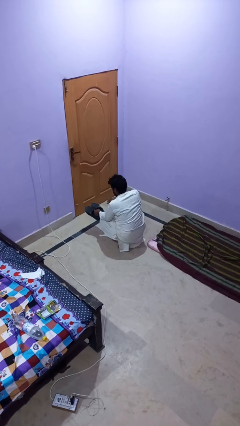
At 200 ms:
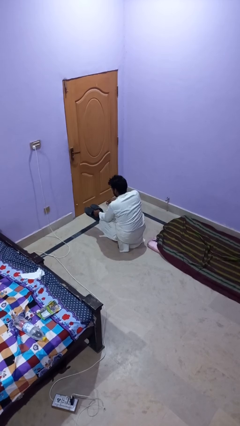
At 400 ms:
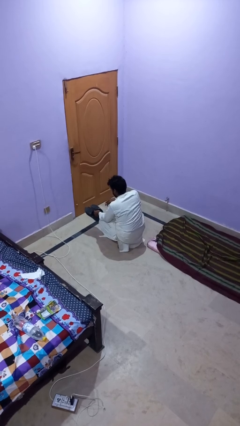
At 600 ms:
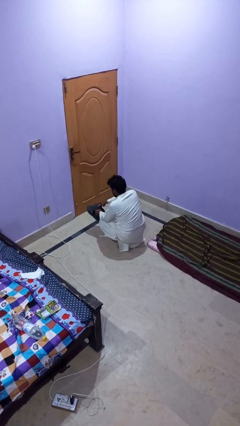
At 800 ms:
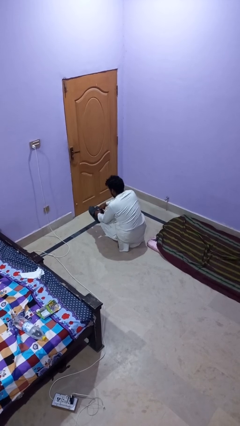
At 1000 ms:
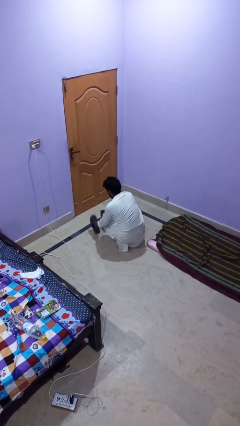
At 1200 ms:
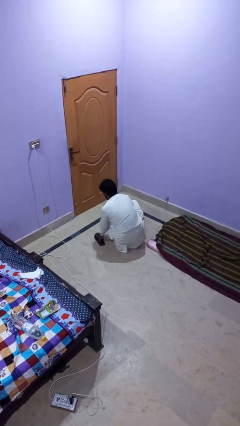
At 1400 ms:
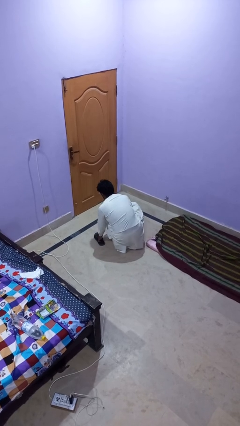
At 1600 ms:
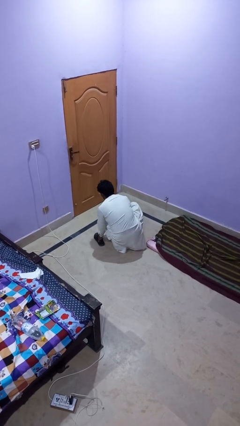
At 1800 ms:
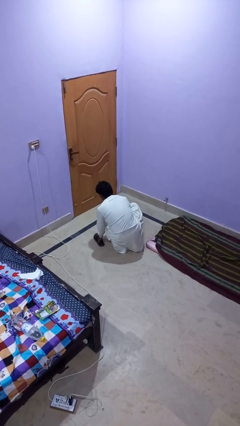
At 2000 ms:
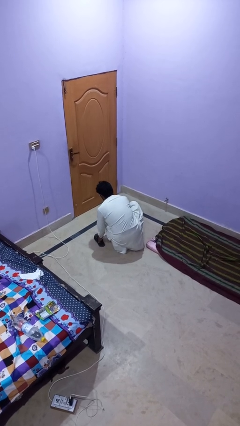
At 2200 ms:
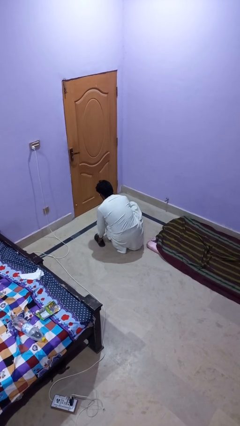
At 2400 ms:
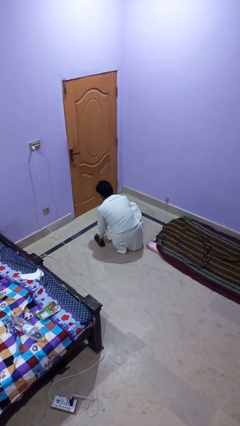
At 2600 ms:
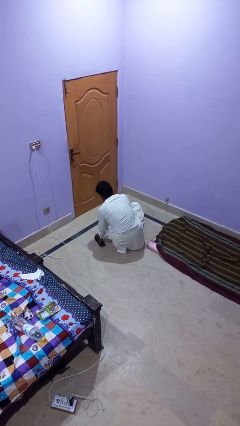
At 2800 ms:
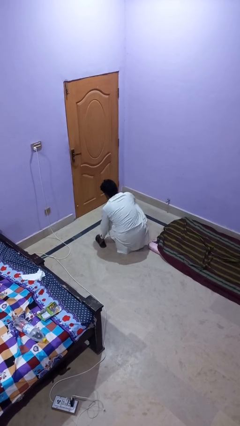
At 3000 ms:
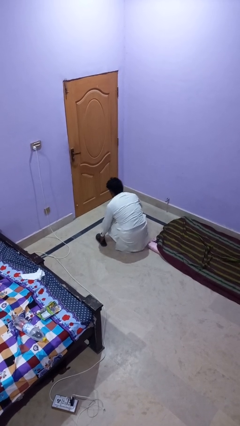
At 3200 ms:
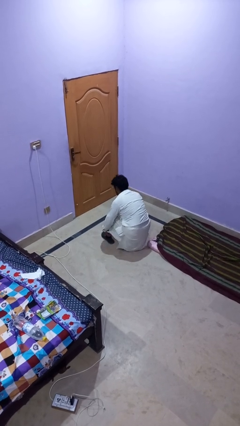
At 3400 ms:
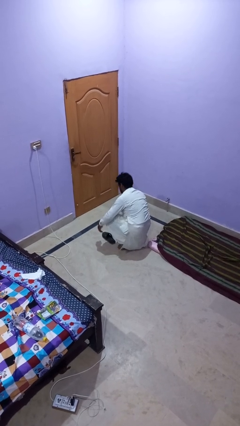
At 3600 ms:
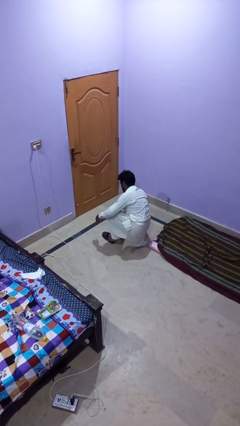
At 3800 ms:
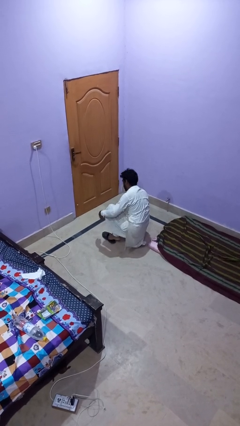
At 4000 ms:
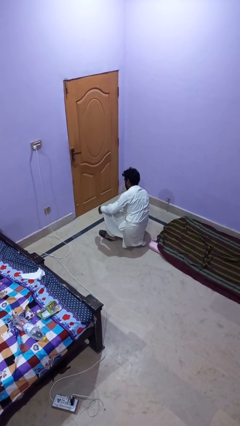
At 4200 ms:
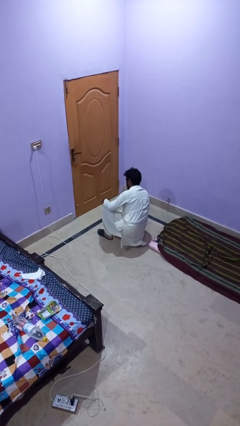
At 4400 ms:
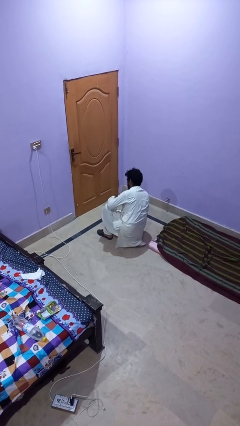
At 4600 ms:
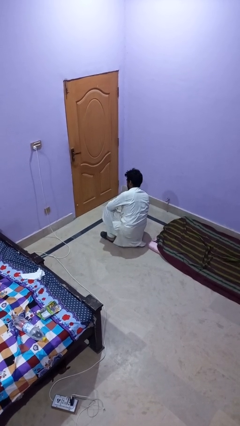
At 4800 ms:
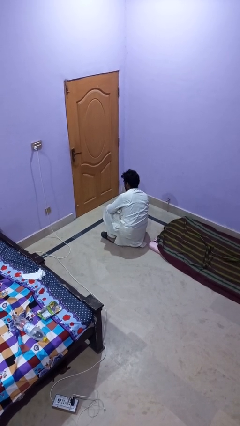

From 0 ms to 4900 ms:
person puts on shoes

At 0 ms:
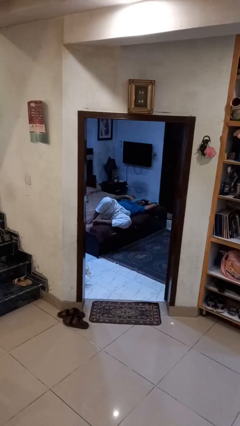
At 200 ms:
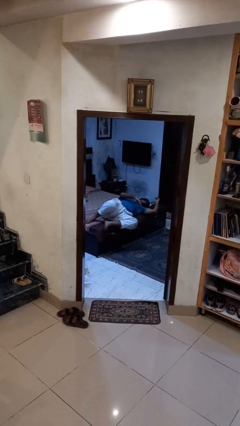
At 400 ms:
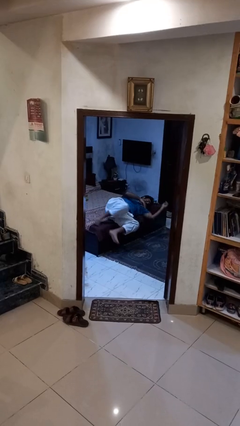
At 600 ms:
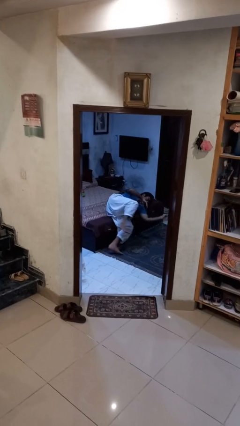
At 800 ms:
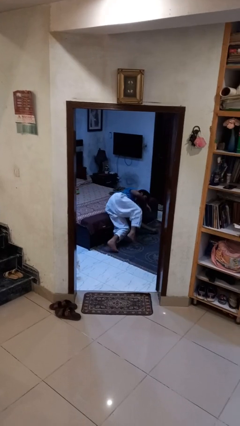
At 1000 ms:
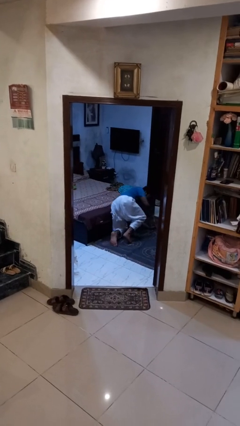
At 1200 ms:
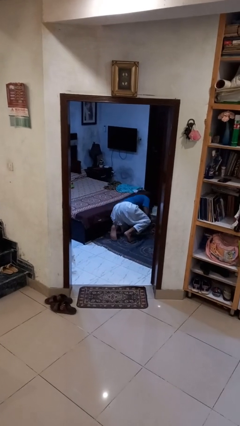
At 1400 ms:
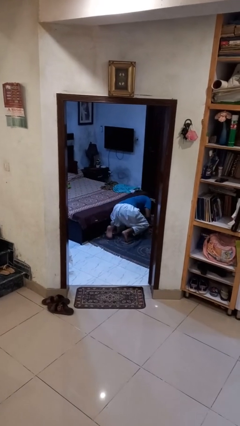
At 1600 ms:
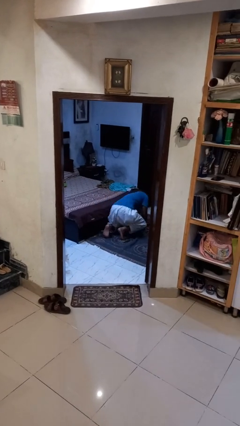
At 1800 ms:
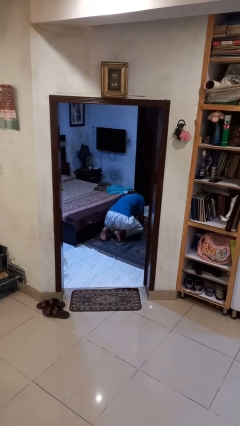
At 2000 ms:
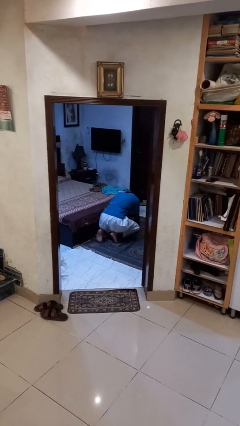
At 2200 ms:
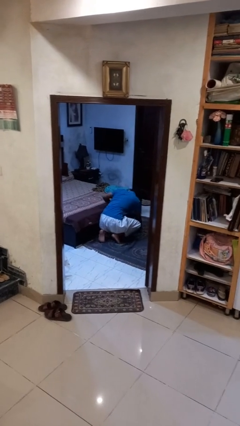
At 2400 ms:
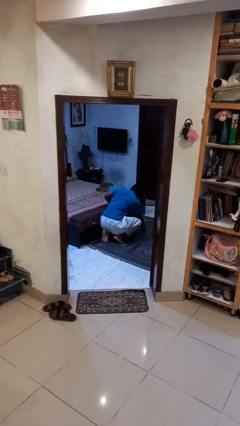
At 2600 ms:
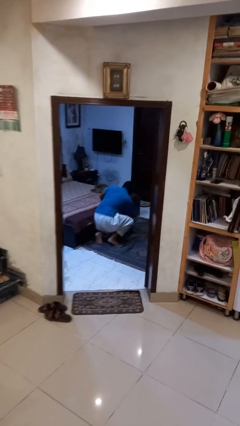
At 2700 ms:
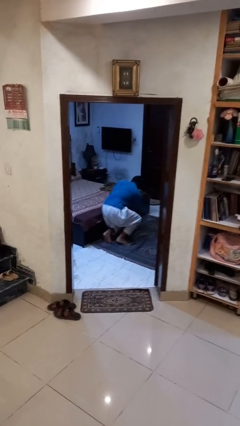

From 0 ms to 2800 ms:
person falls from bed

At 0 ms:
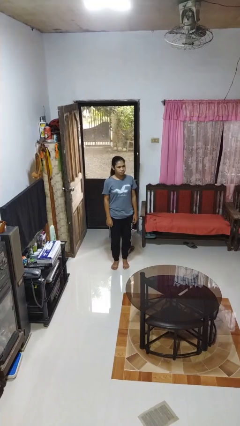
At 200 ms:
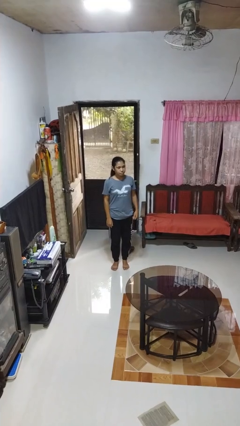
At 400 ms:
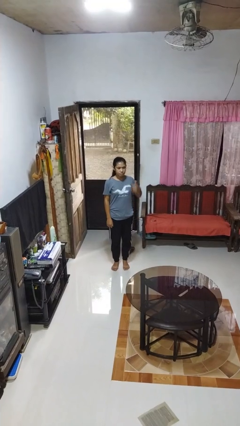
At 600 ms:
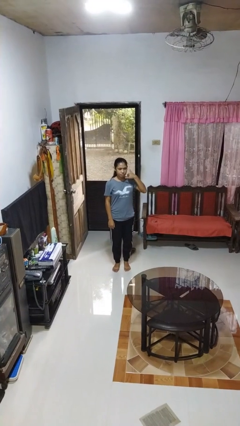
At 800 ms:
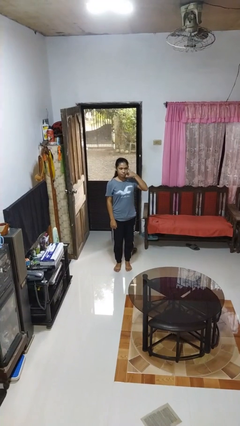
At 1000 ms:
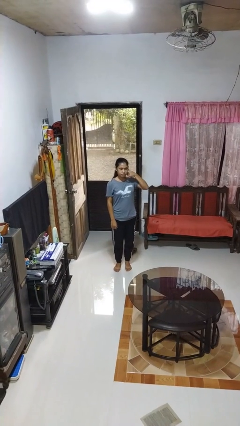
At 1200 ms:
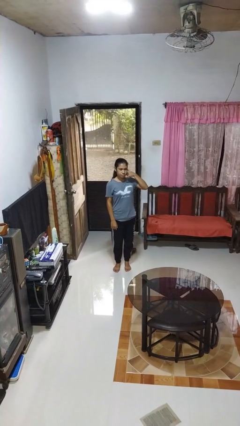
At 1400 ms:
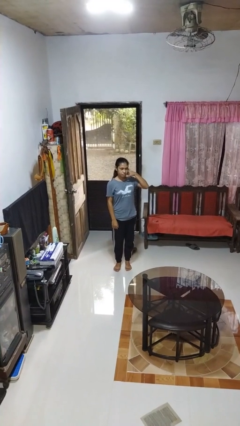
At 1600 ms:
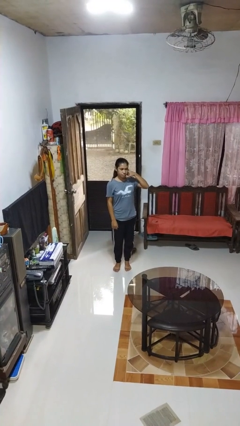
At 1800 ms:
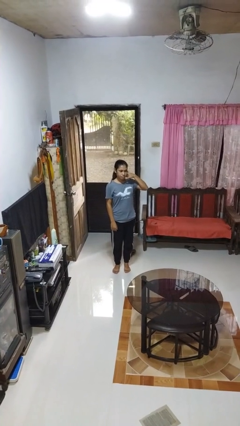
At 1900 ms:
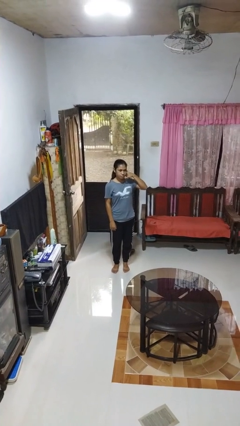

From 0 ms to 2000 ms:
person gestures call me

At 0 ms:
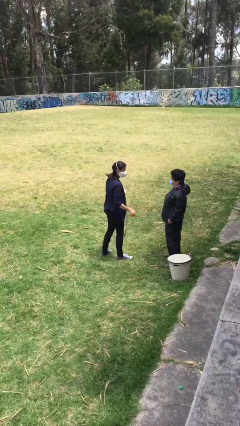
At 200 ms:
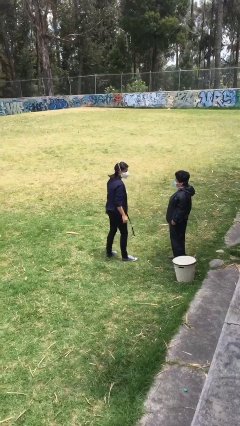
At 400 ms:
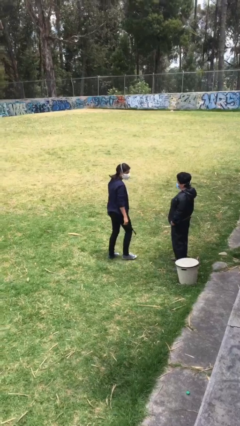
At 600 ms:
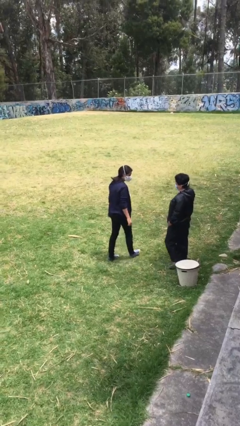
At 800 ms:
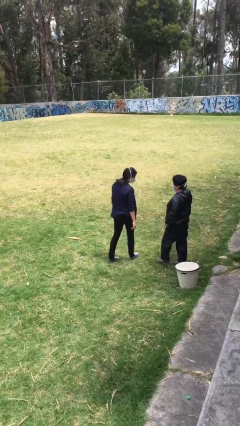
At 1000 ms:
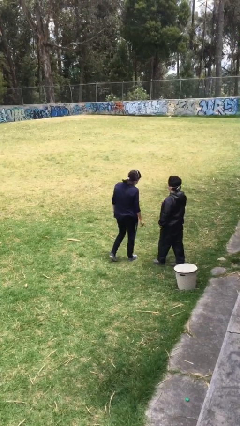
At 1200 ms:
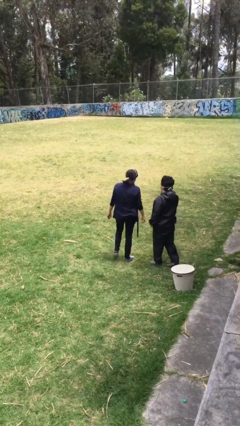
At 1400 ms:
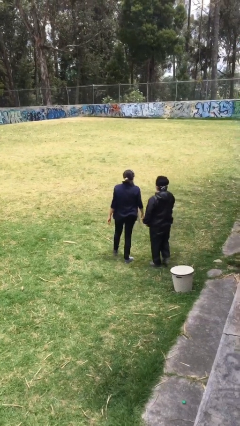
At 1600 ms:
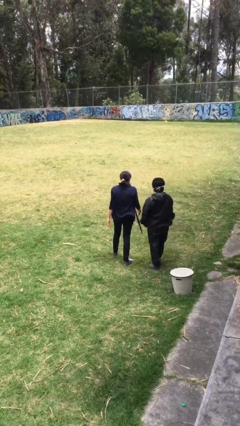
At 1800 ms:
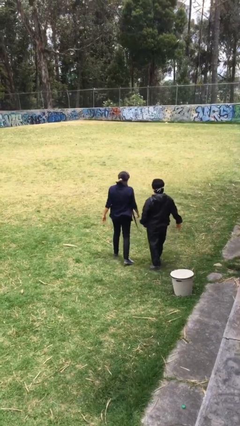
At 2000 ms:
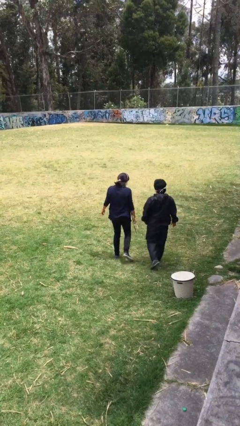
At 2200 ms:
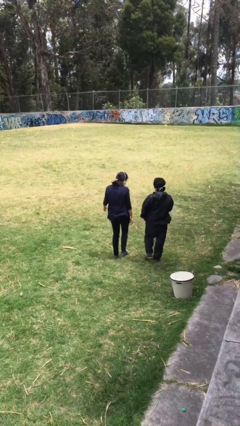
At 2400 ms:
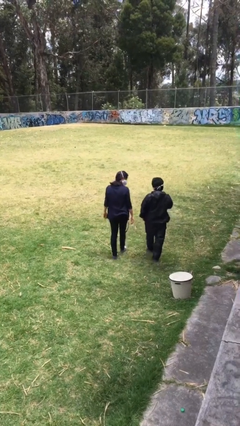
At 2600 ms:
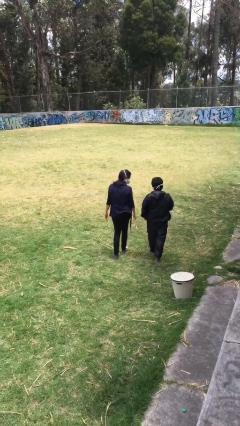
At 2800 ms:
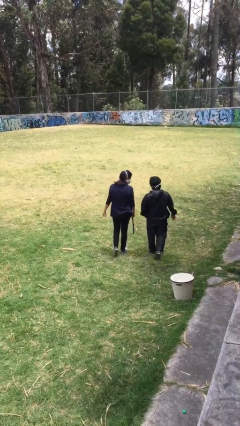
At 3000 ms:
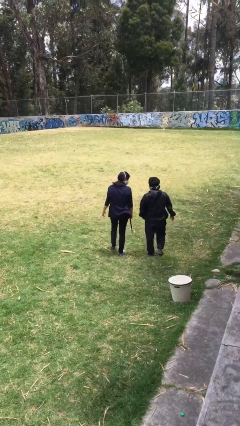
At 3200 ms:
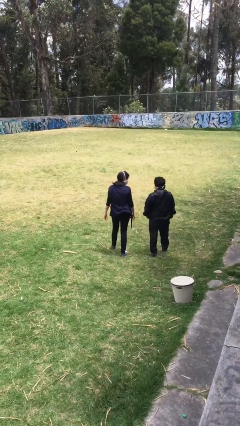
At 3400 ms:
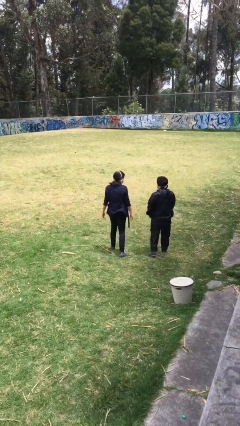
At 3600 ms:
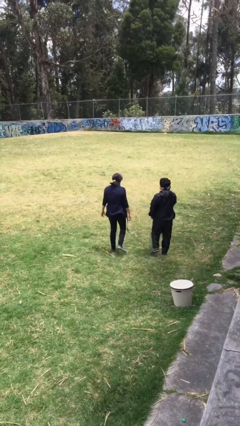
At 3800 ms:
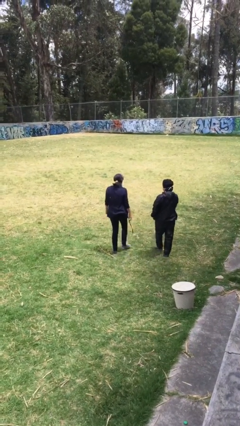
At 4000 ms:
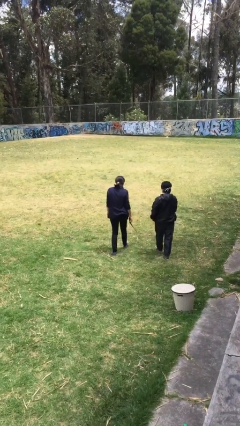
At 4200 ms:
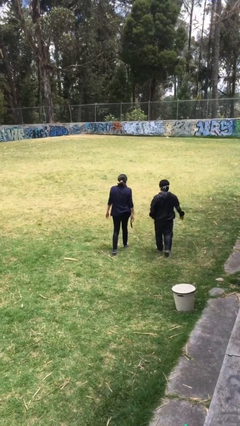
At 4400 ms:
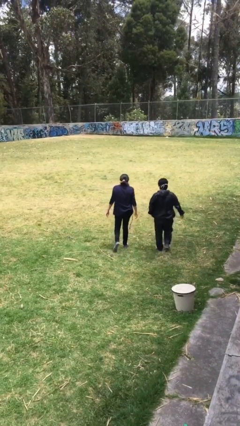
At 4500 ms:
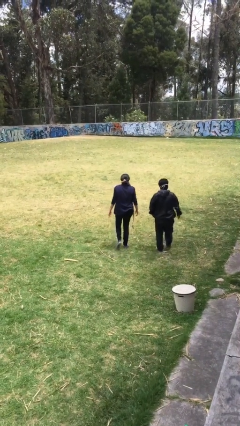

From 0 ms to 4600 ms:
person talks to person

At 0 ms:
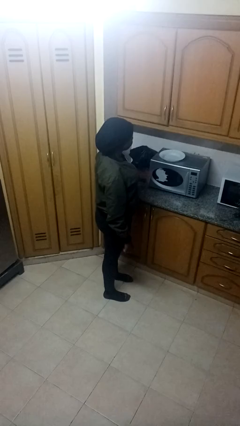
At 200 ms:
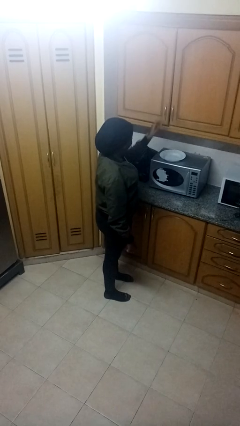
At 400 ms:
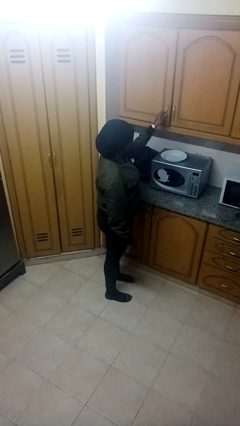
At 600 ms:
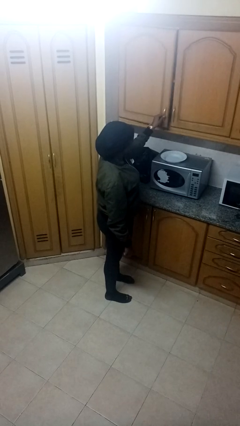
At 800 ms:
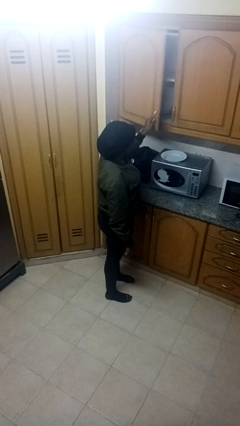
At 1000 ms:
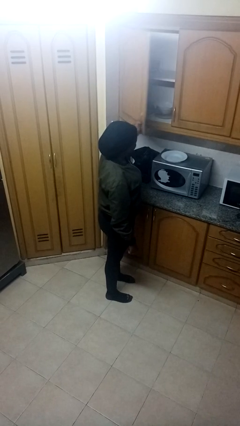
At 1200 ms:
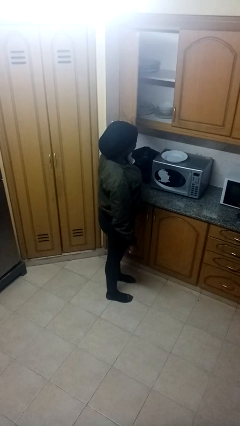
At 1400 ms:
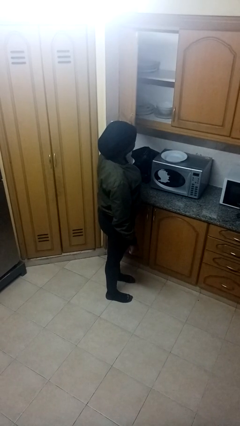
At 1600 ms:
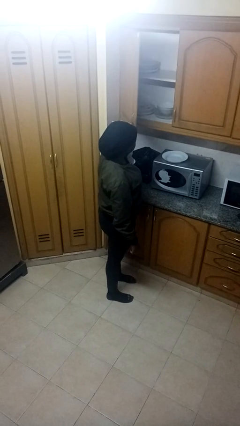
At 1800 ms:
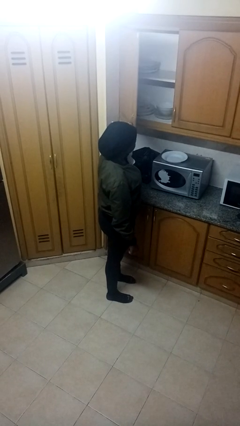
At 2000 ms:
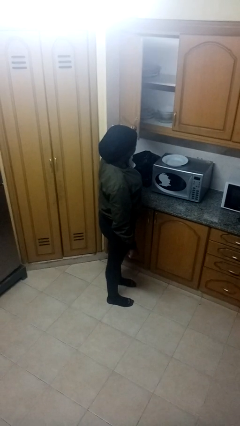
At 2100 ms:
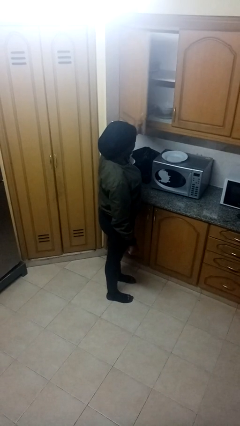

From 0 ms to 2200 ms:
person opens cabinet

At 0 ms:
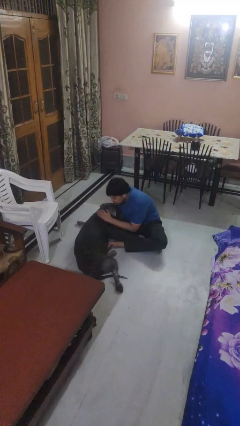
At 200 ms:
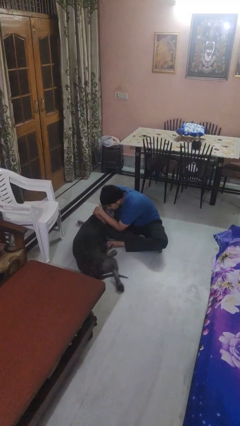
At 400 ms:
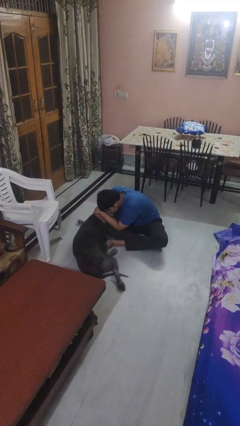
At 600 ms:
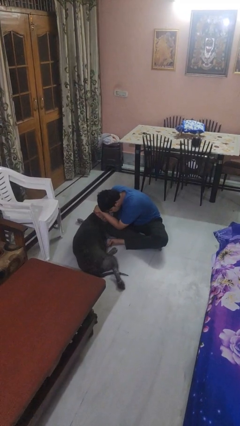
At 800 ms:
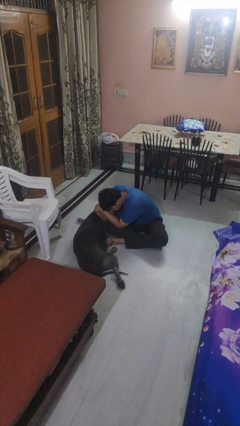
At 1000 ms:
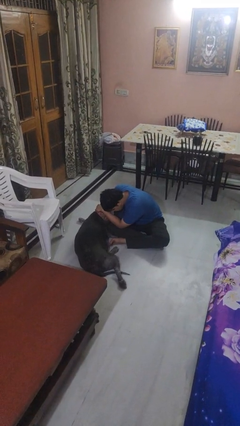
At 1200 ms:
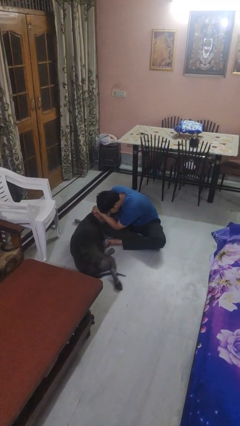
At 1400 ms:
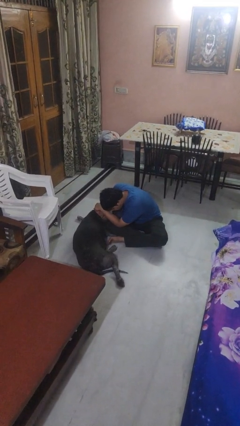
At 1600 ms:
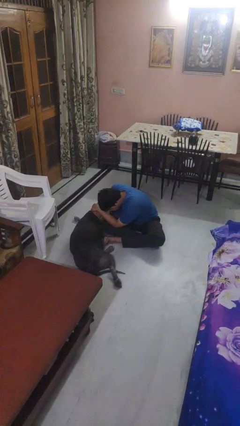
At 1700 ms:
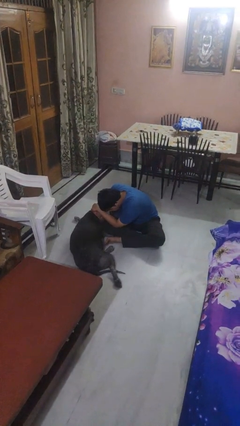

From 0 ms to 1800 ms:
person hugs dog
